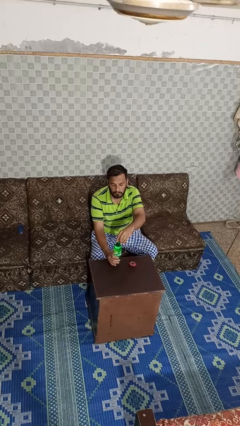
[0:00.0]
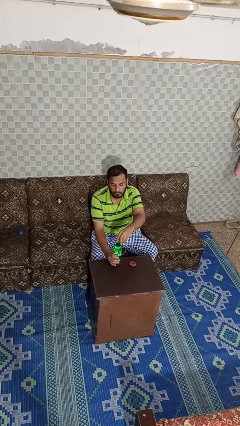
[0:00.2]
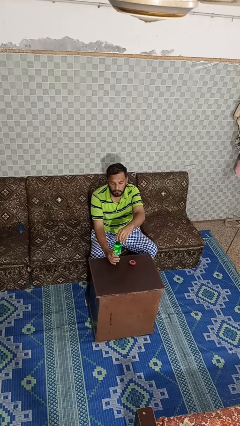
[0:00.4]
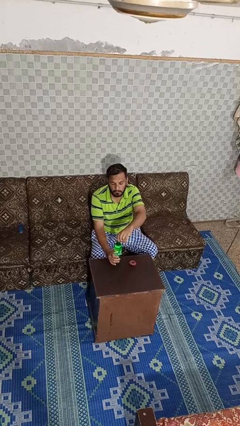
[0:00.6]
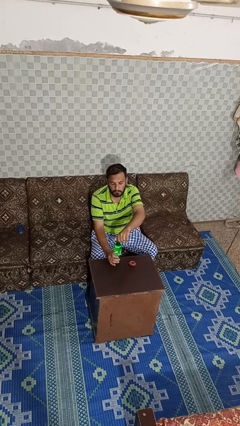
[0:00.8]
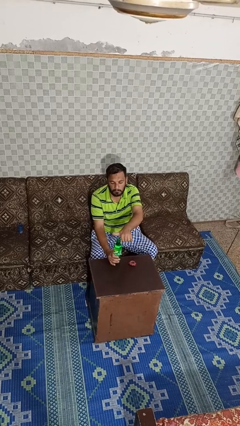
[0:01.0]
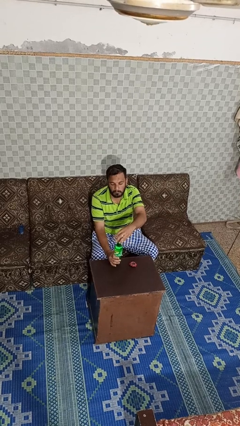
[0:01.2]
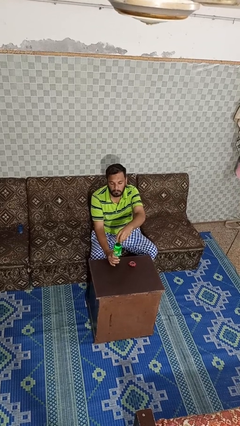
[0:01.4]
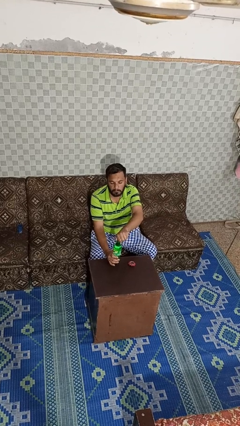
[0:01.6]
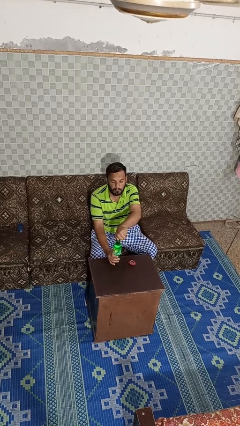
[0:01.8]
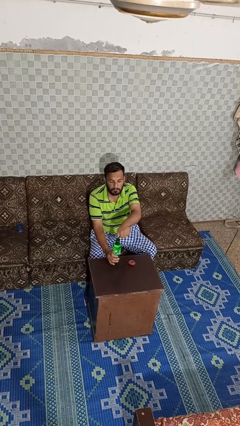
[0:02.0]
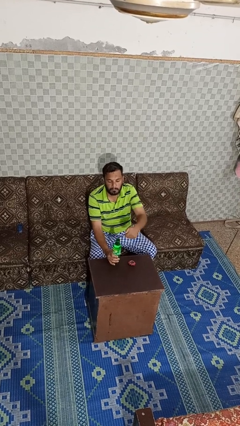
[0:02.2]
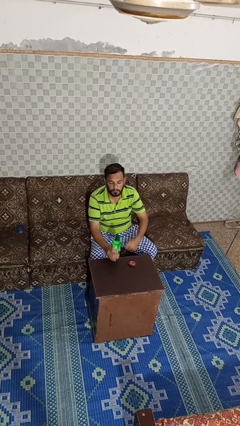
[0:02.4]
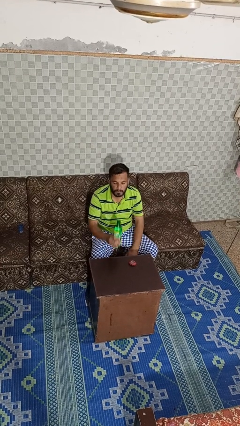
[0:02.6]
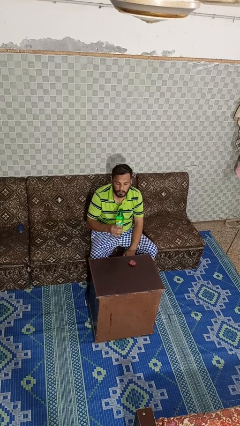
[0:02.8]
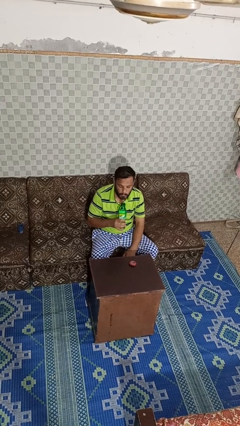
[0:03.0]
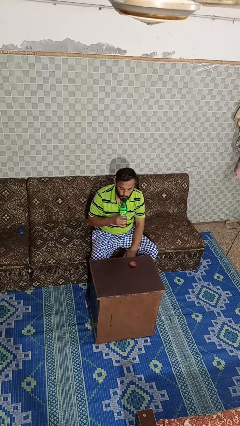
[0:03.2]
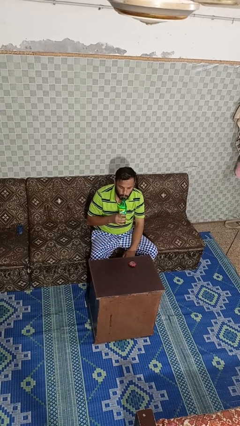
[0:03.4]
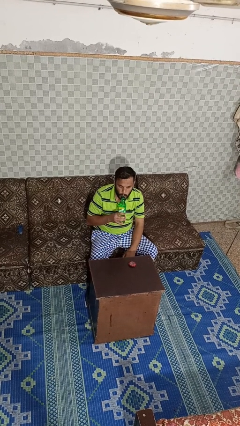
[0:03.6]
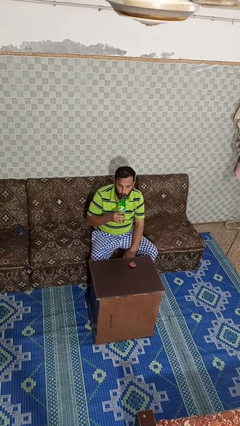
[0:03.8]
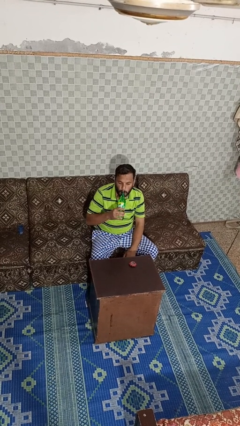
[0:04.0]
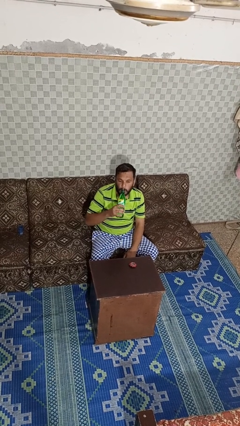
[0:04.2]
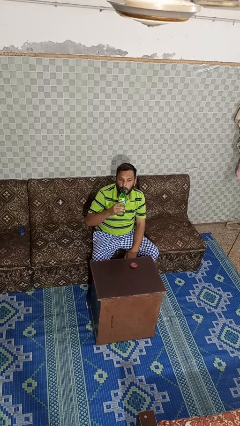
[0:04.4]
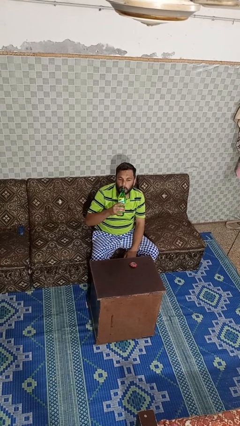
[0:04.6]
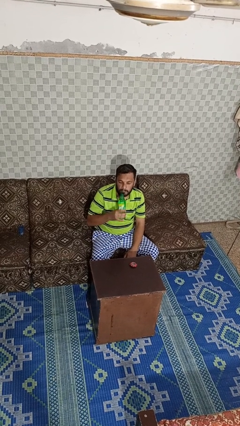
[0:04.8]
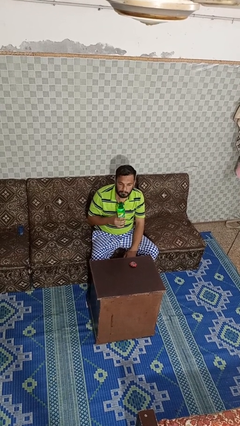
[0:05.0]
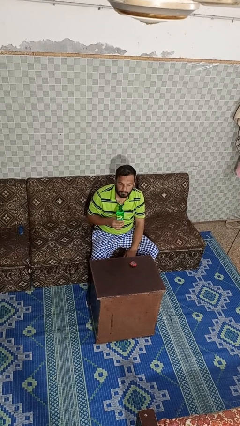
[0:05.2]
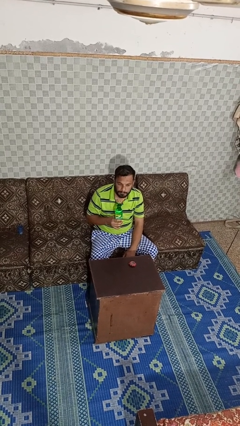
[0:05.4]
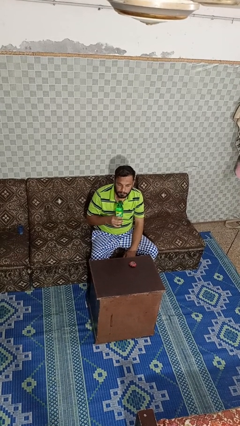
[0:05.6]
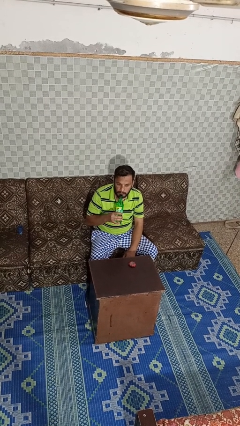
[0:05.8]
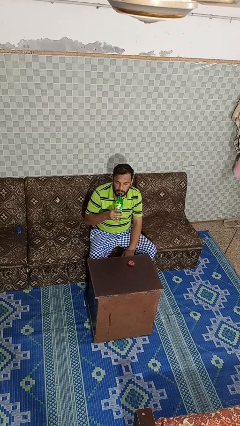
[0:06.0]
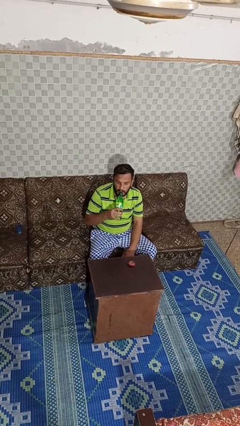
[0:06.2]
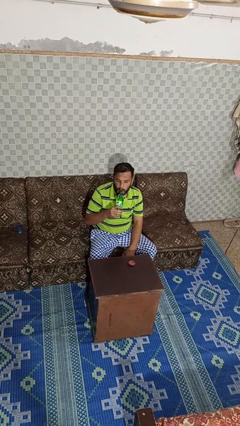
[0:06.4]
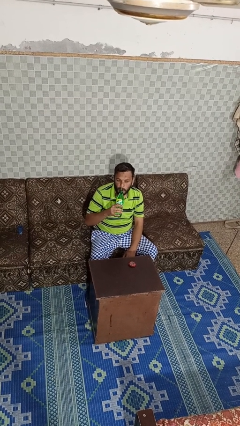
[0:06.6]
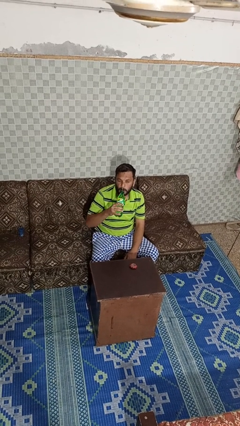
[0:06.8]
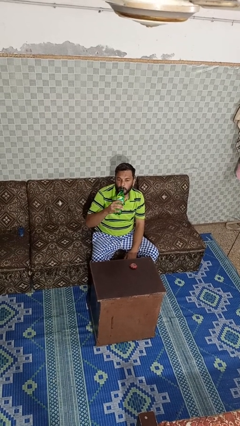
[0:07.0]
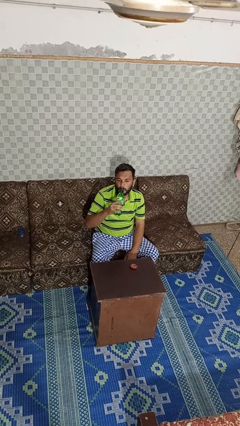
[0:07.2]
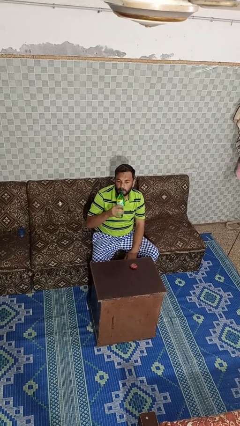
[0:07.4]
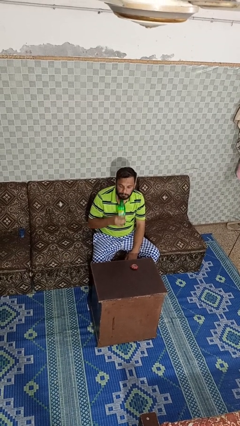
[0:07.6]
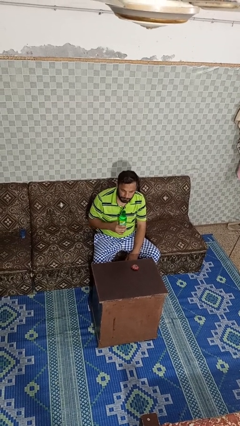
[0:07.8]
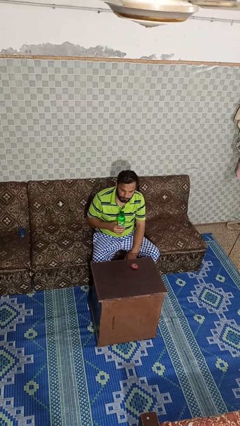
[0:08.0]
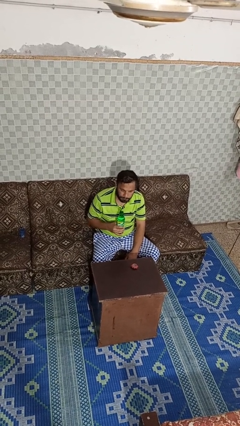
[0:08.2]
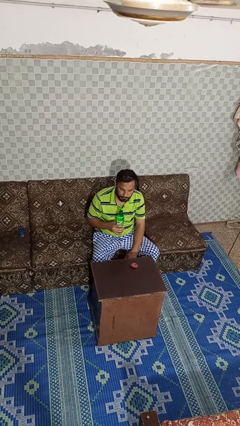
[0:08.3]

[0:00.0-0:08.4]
person drinks from bottle

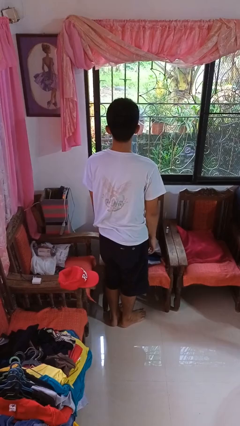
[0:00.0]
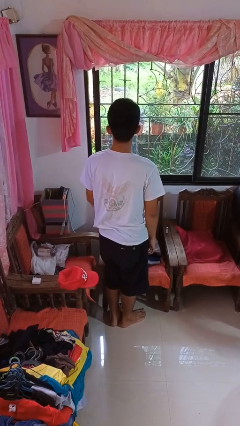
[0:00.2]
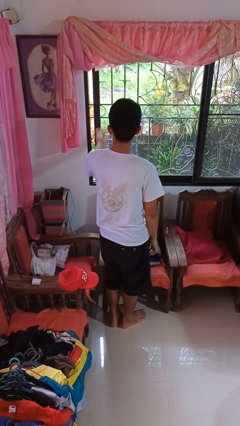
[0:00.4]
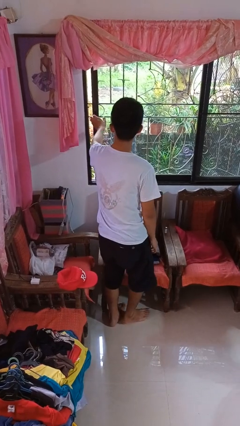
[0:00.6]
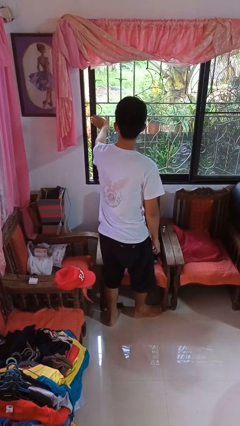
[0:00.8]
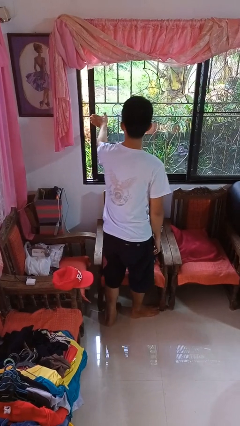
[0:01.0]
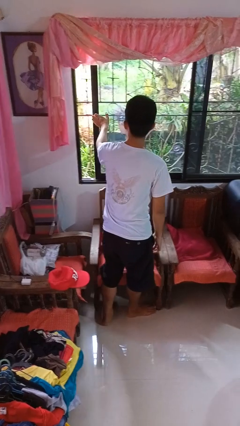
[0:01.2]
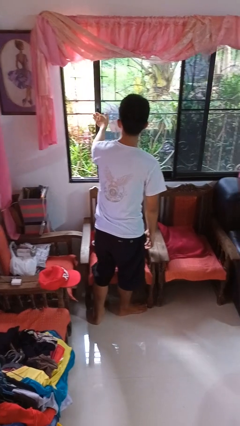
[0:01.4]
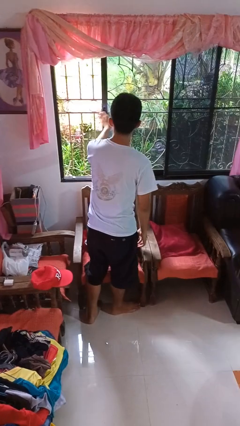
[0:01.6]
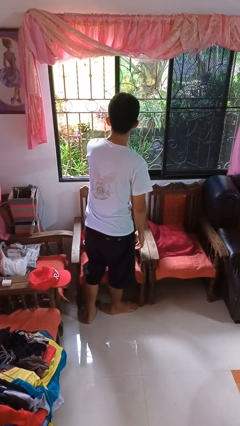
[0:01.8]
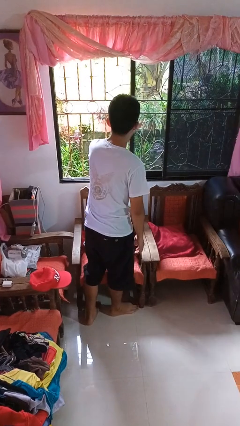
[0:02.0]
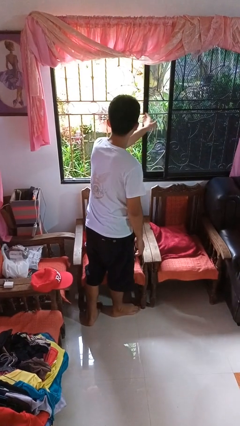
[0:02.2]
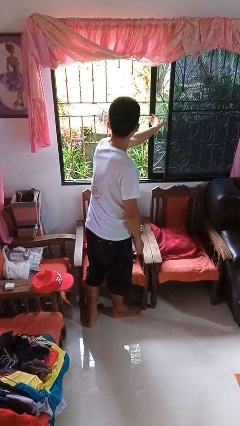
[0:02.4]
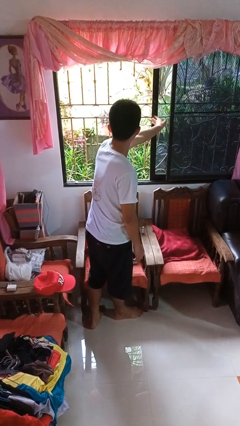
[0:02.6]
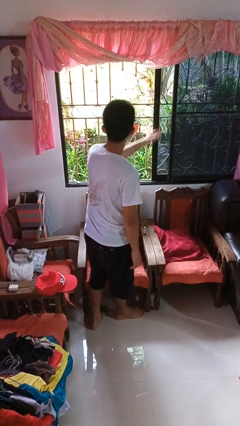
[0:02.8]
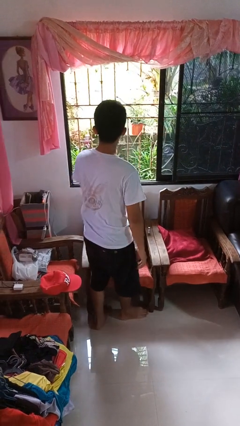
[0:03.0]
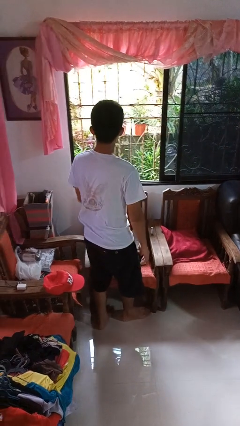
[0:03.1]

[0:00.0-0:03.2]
person opens home window

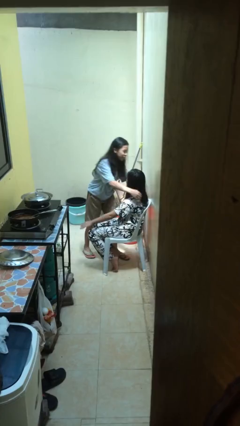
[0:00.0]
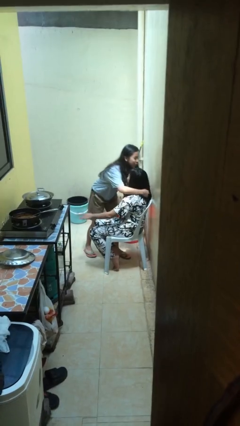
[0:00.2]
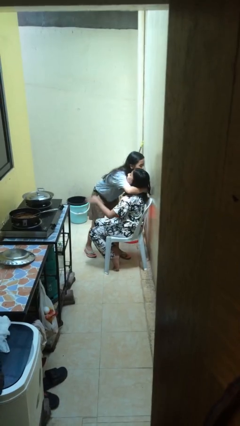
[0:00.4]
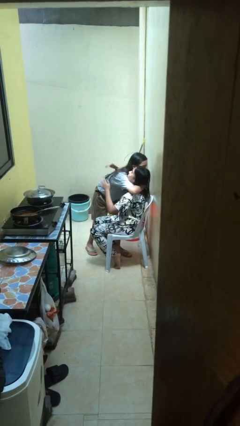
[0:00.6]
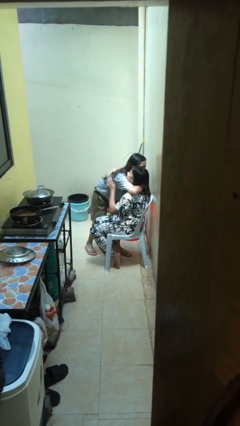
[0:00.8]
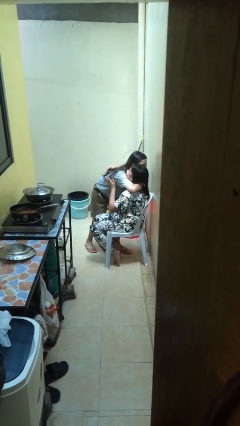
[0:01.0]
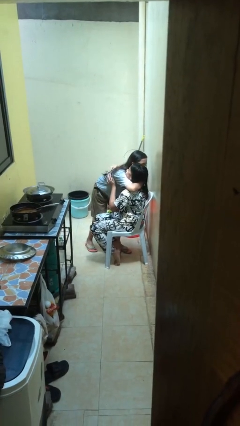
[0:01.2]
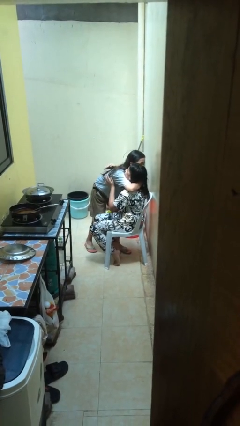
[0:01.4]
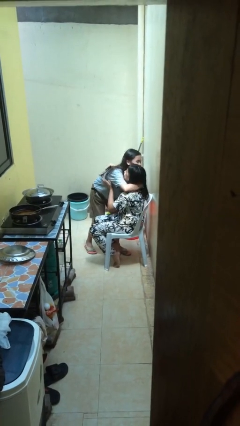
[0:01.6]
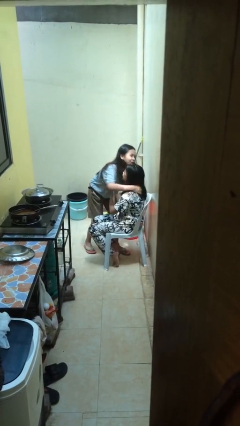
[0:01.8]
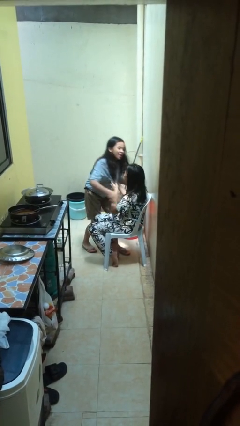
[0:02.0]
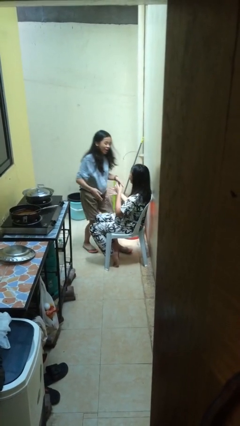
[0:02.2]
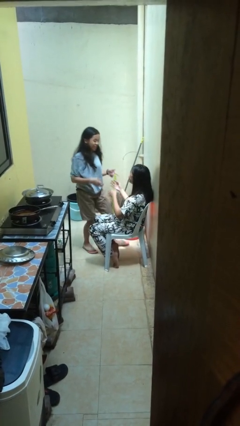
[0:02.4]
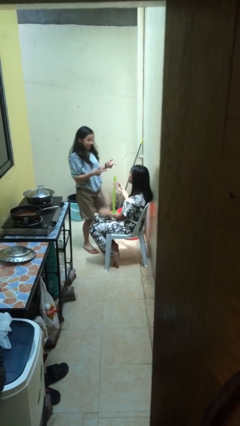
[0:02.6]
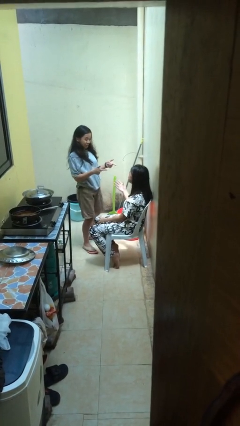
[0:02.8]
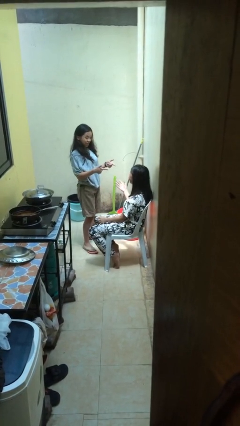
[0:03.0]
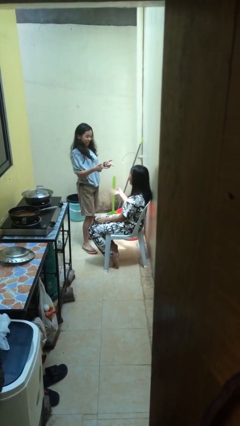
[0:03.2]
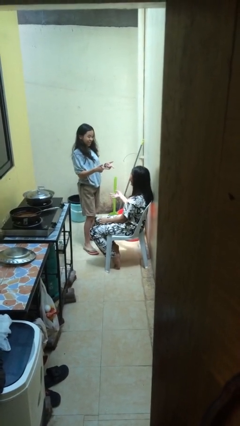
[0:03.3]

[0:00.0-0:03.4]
person embraces person

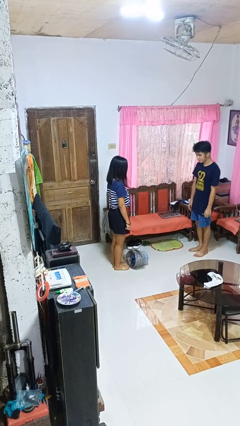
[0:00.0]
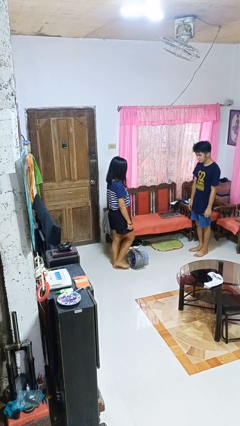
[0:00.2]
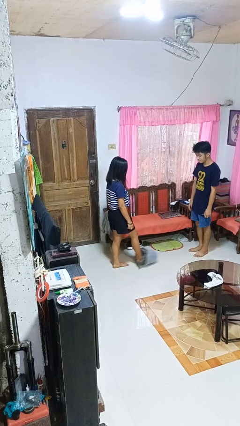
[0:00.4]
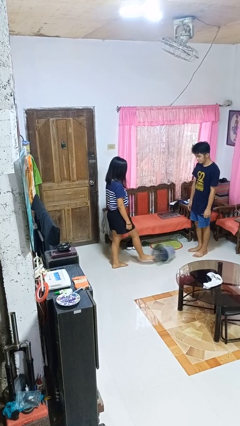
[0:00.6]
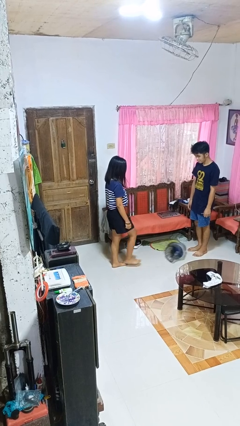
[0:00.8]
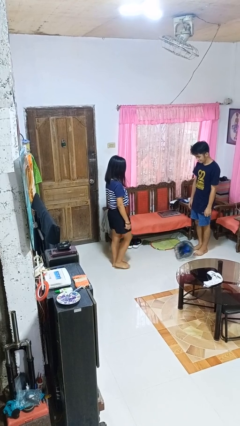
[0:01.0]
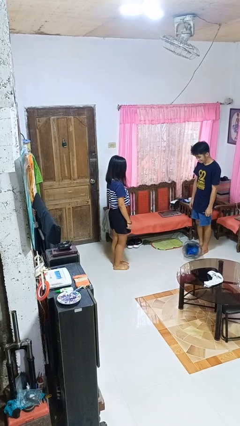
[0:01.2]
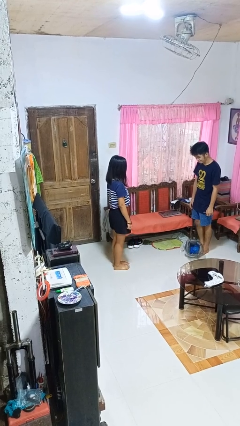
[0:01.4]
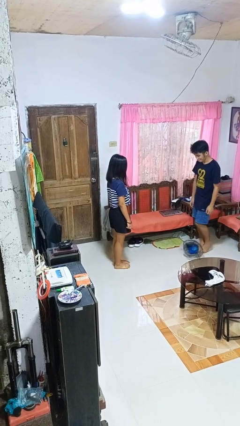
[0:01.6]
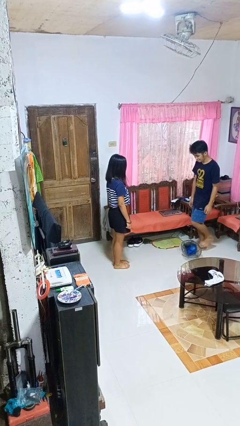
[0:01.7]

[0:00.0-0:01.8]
person kicks object to person

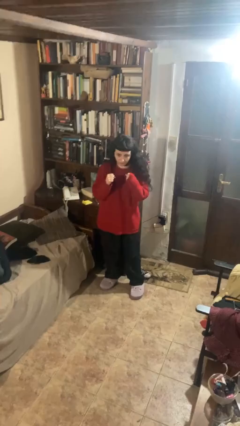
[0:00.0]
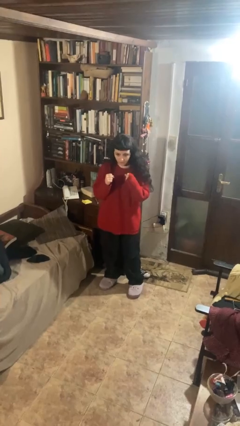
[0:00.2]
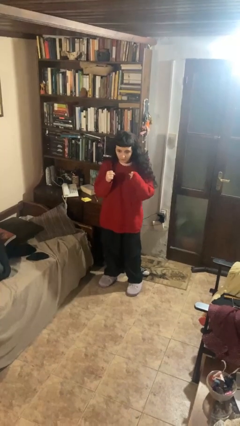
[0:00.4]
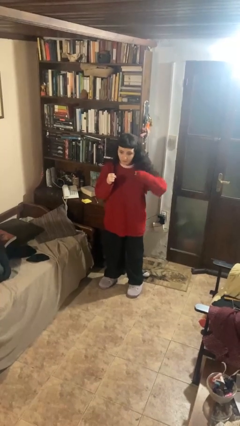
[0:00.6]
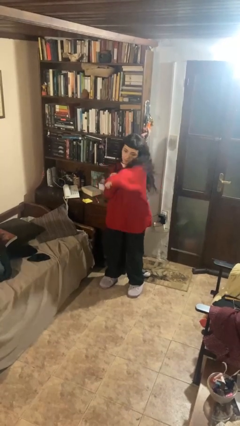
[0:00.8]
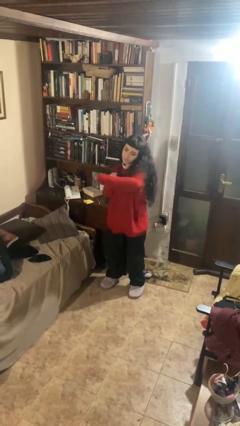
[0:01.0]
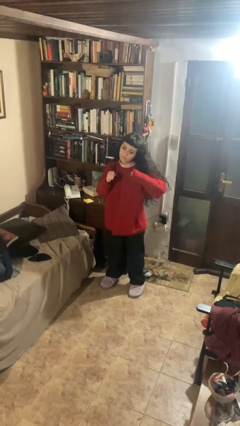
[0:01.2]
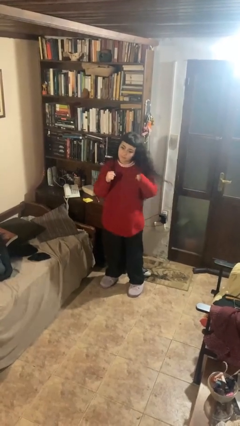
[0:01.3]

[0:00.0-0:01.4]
person punches
